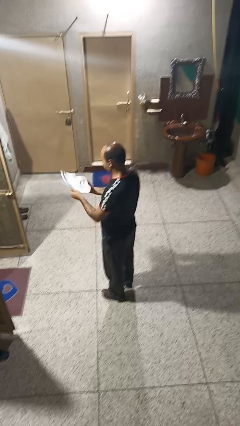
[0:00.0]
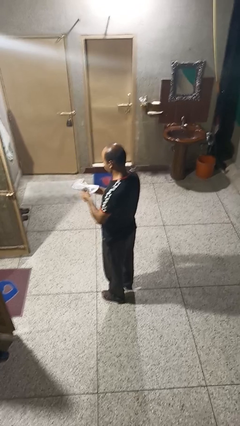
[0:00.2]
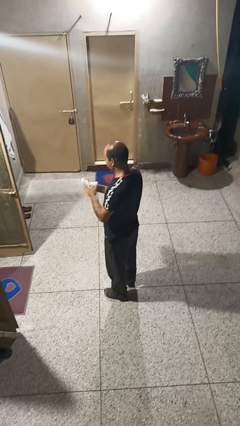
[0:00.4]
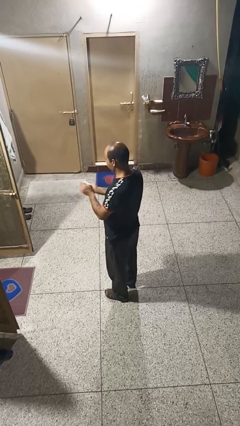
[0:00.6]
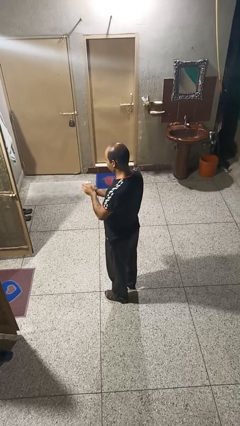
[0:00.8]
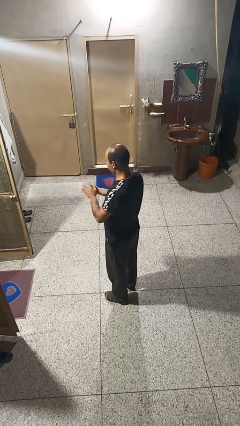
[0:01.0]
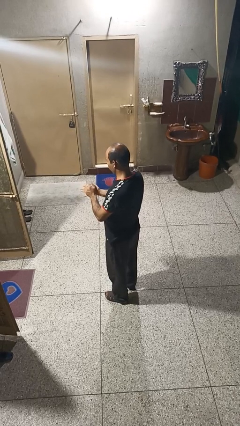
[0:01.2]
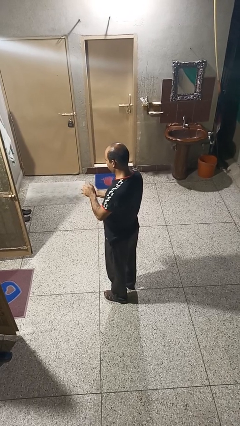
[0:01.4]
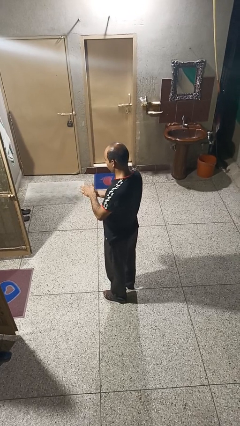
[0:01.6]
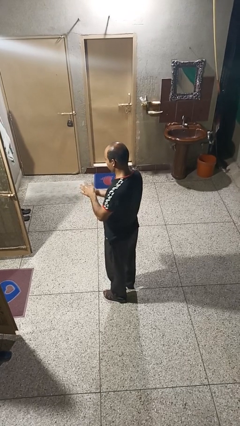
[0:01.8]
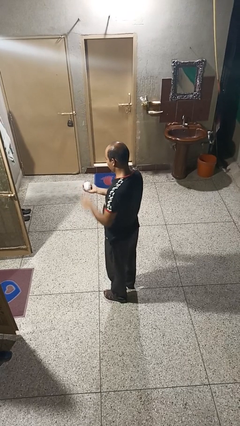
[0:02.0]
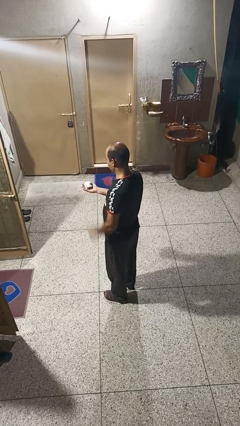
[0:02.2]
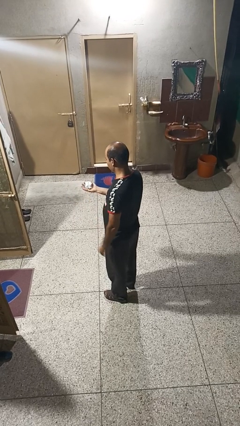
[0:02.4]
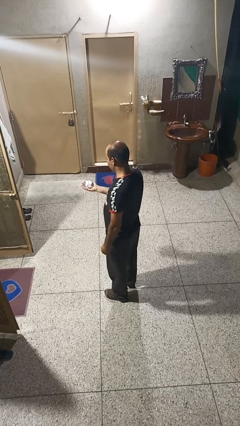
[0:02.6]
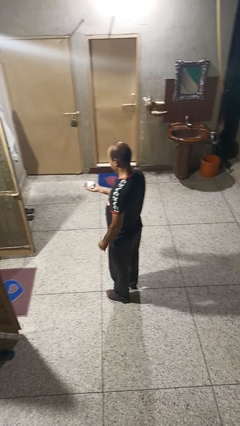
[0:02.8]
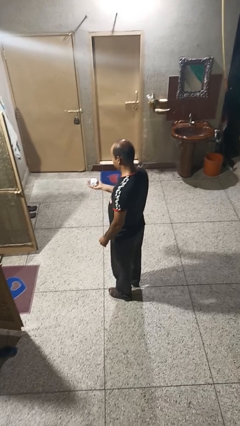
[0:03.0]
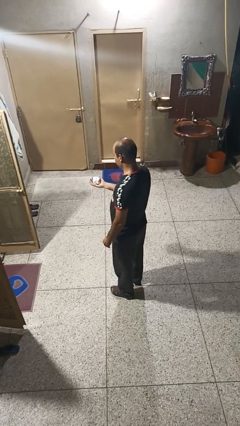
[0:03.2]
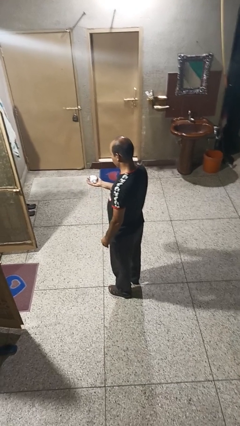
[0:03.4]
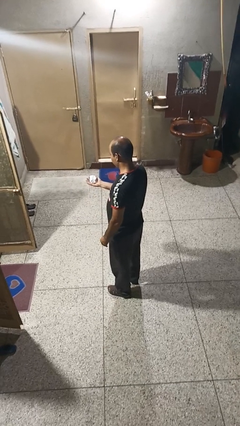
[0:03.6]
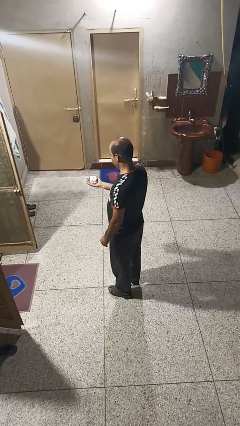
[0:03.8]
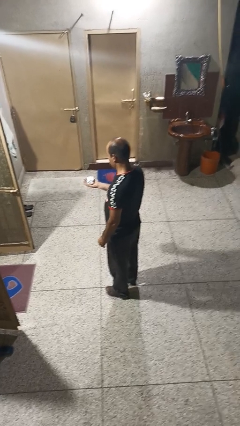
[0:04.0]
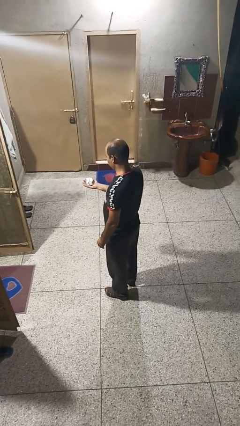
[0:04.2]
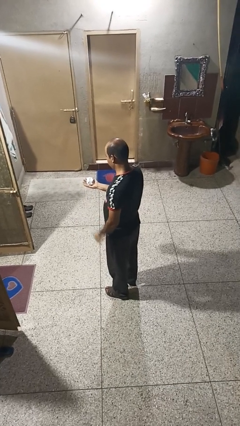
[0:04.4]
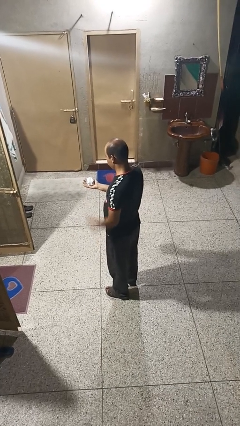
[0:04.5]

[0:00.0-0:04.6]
person crumples paper

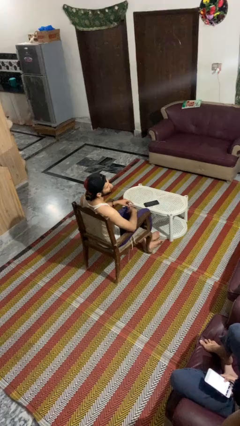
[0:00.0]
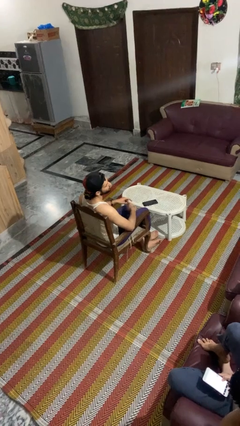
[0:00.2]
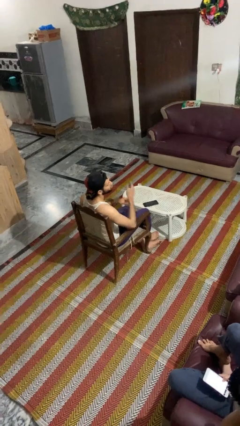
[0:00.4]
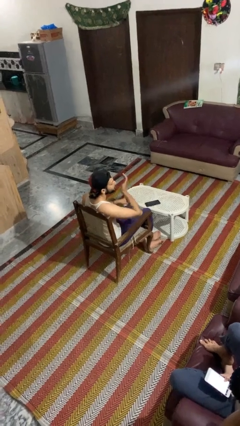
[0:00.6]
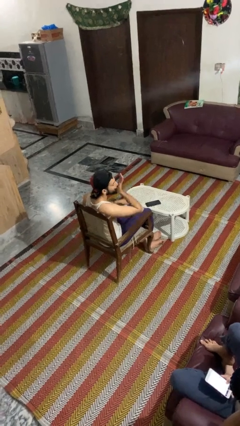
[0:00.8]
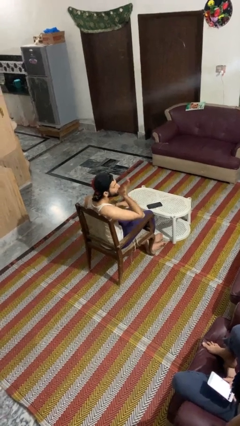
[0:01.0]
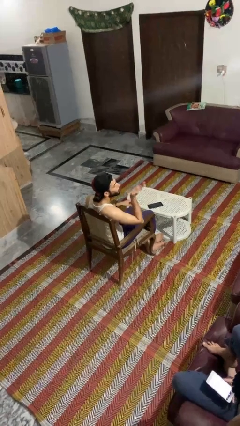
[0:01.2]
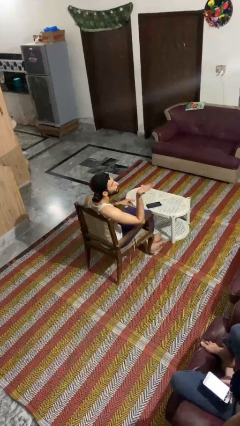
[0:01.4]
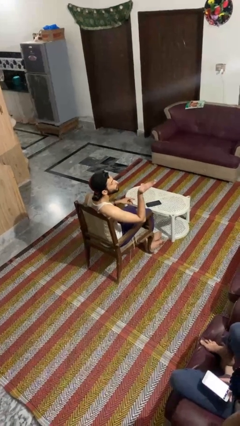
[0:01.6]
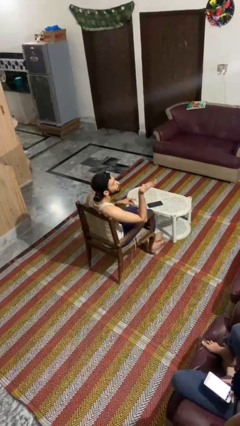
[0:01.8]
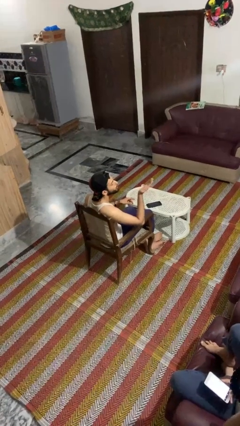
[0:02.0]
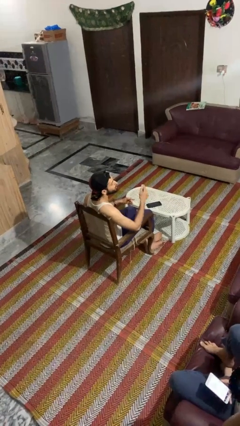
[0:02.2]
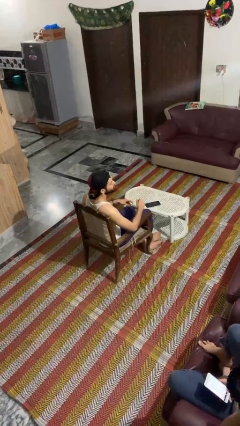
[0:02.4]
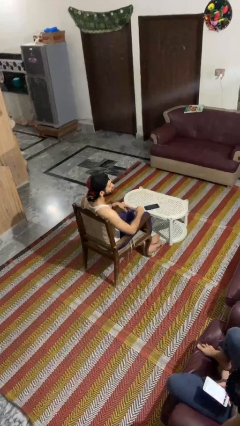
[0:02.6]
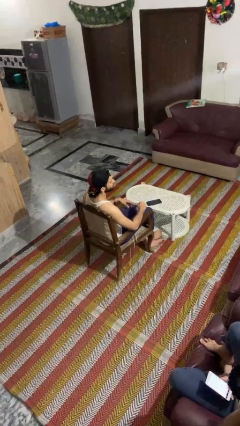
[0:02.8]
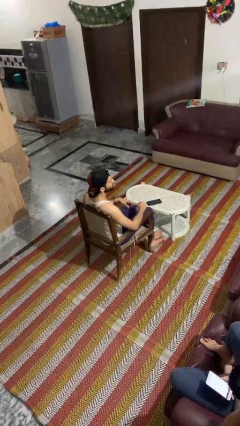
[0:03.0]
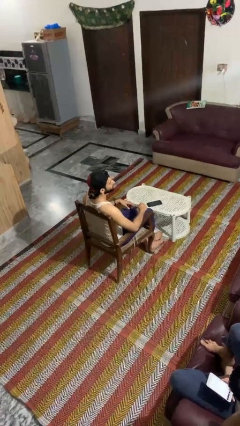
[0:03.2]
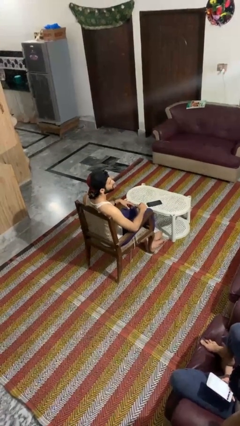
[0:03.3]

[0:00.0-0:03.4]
person gestures blow kiss

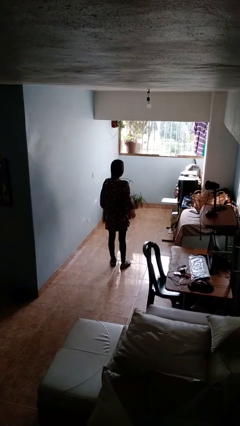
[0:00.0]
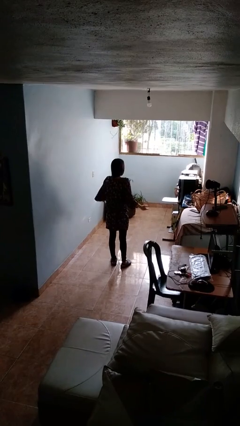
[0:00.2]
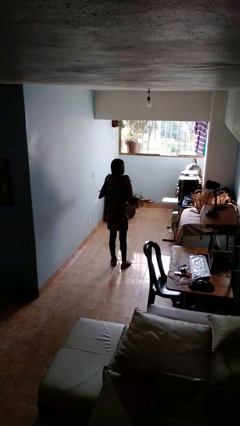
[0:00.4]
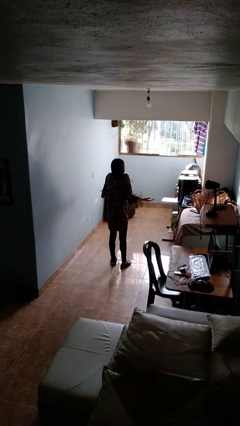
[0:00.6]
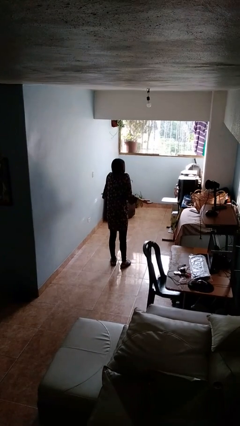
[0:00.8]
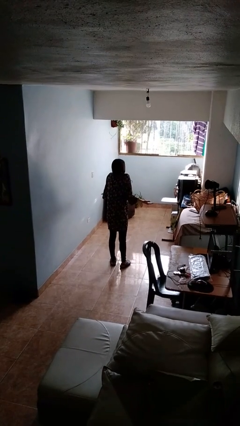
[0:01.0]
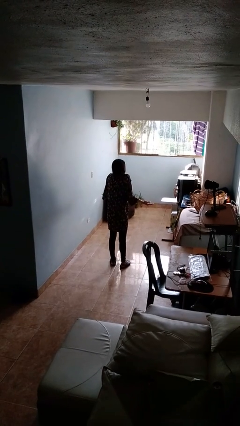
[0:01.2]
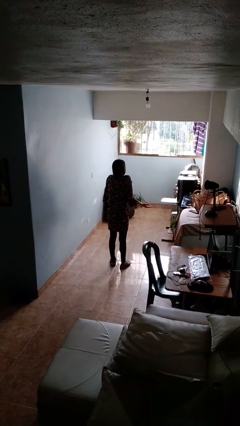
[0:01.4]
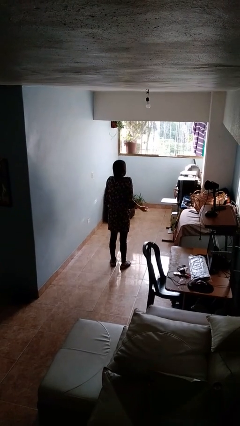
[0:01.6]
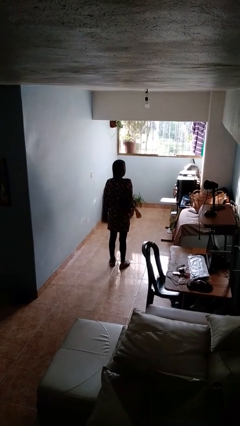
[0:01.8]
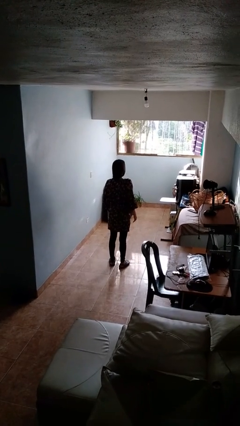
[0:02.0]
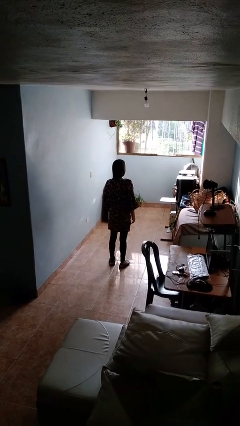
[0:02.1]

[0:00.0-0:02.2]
person shrugs

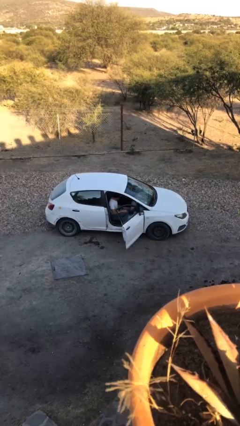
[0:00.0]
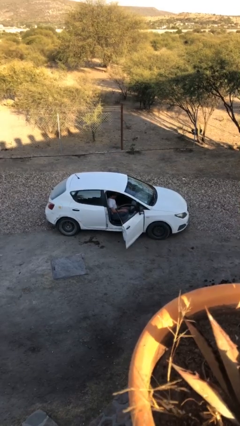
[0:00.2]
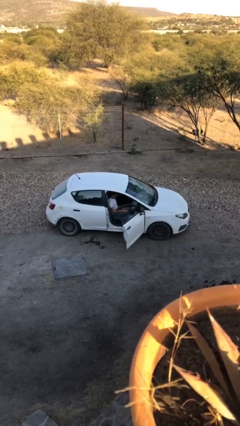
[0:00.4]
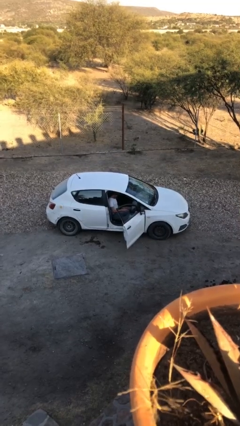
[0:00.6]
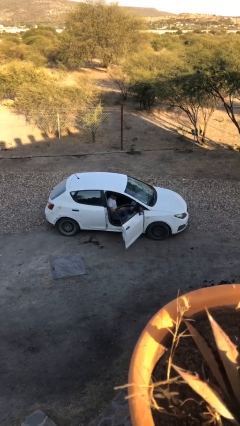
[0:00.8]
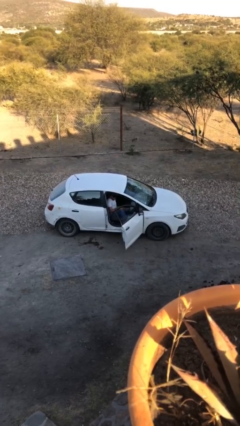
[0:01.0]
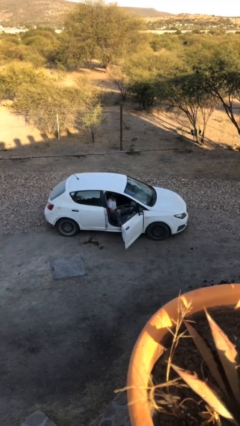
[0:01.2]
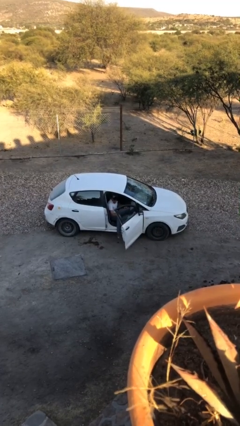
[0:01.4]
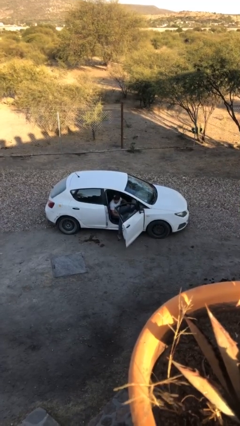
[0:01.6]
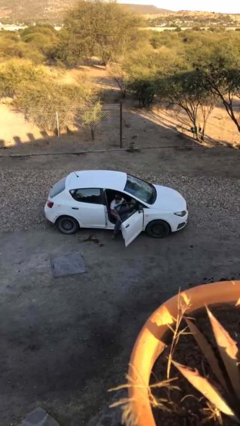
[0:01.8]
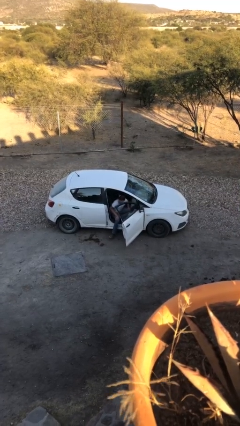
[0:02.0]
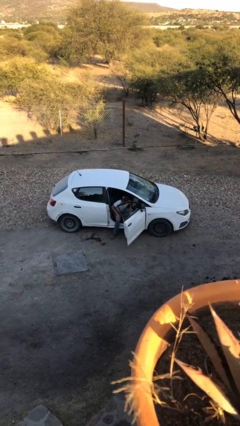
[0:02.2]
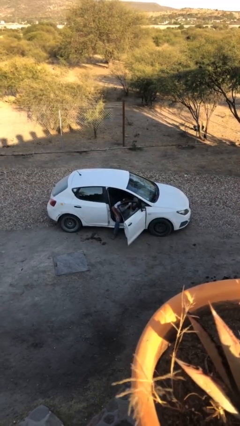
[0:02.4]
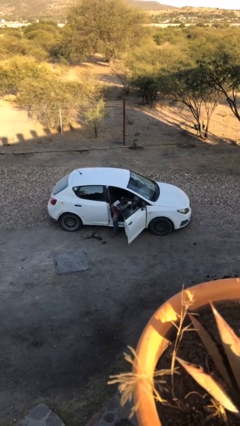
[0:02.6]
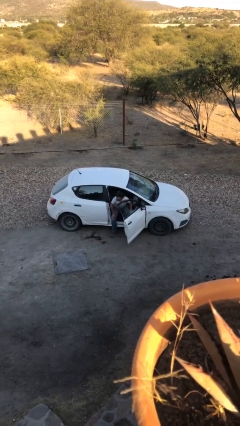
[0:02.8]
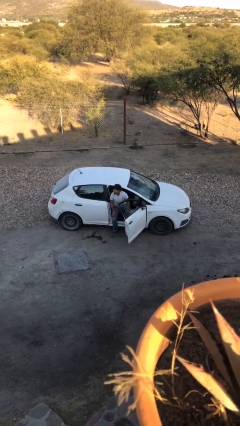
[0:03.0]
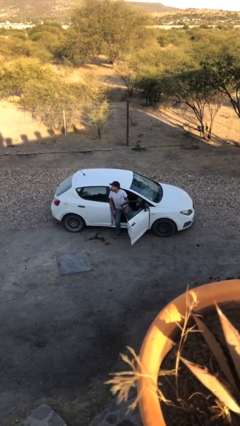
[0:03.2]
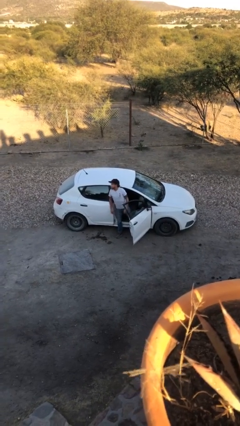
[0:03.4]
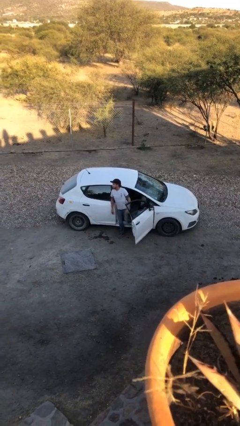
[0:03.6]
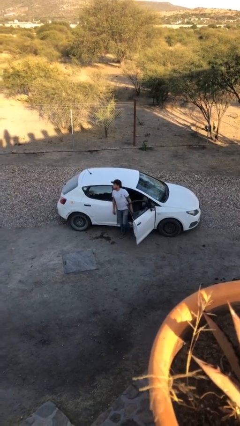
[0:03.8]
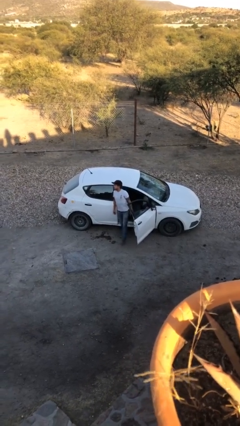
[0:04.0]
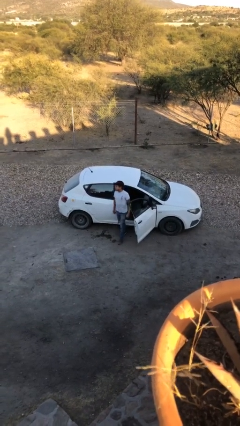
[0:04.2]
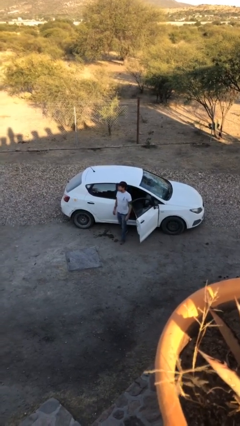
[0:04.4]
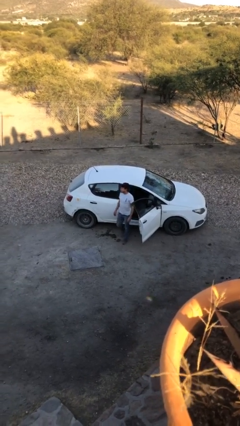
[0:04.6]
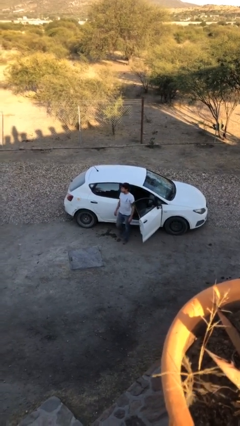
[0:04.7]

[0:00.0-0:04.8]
person exits car

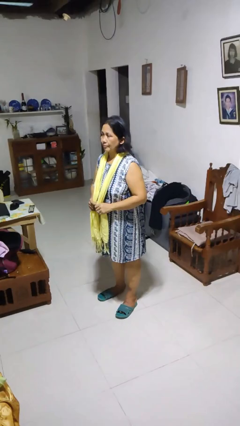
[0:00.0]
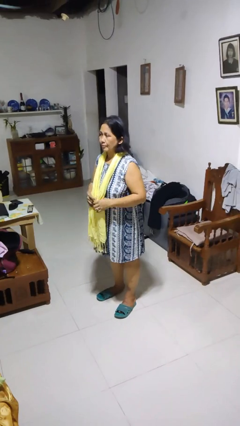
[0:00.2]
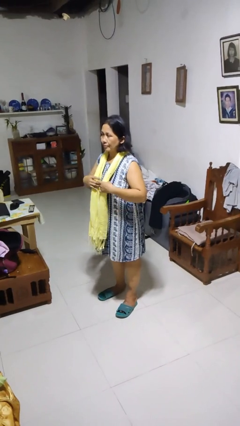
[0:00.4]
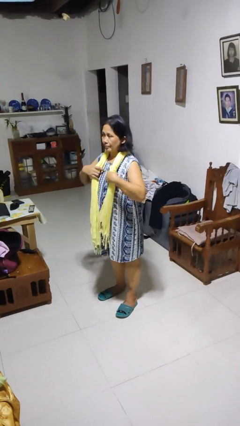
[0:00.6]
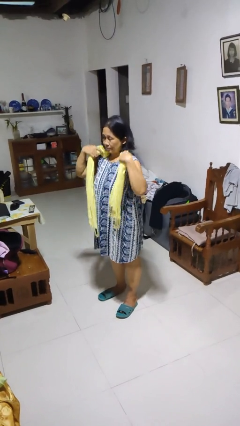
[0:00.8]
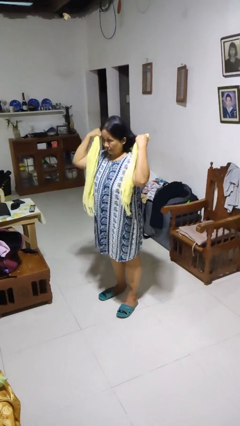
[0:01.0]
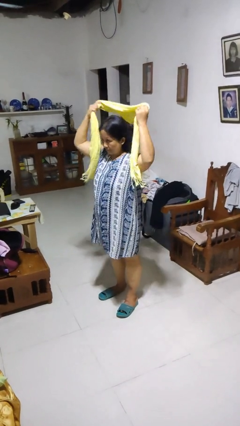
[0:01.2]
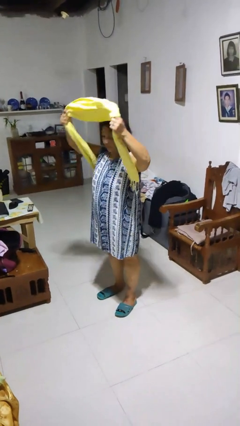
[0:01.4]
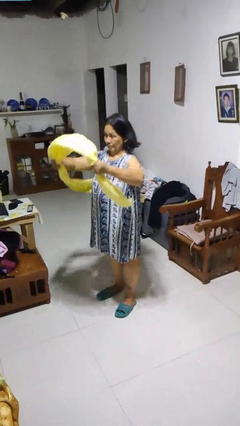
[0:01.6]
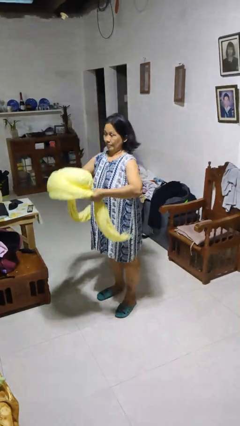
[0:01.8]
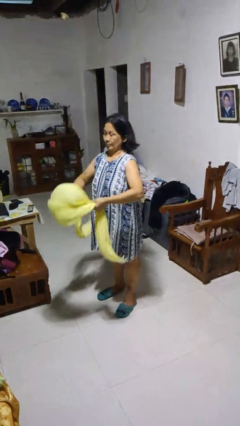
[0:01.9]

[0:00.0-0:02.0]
person takes off scarf

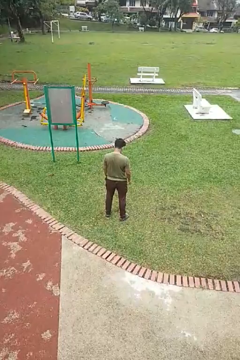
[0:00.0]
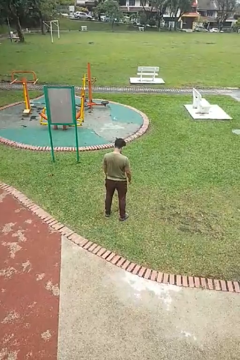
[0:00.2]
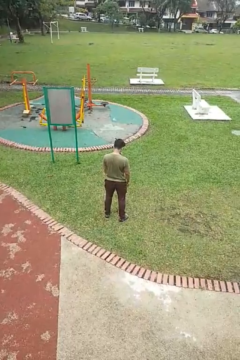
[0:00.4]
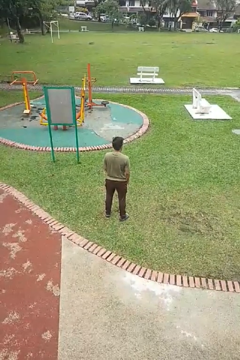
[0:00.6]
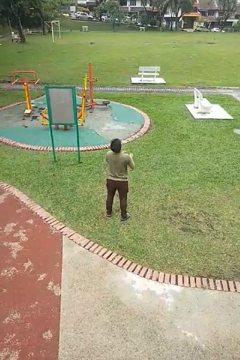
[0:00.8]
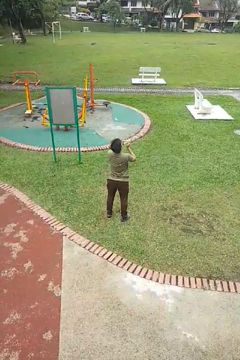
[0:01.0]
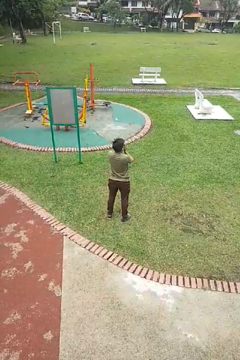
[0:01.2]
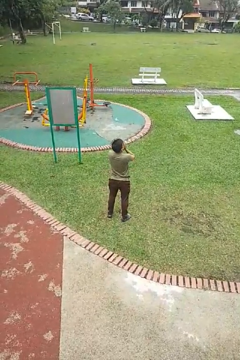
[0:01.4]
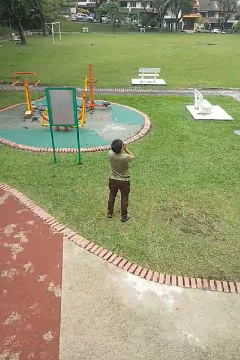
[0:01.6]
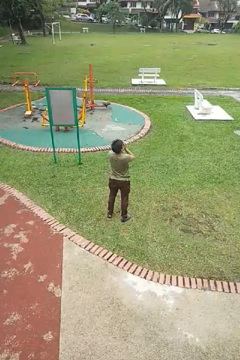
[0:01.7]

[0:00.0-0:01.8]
person sneezes into hand